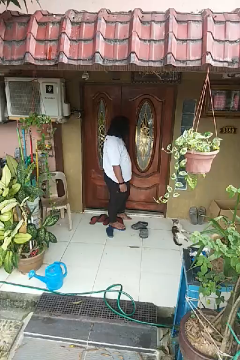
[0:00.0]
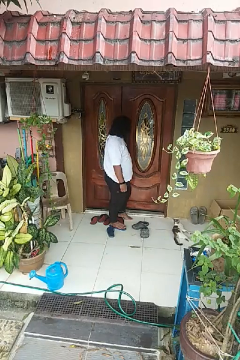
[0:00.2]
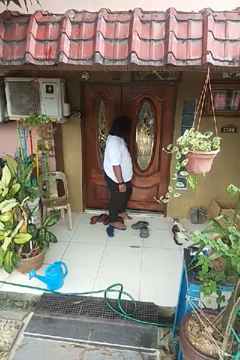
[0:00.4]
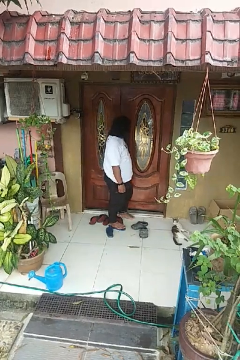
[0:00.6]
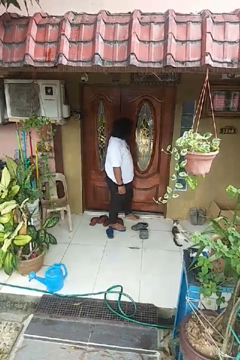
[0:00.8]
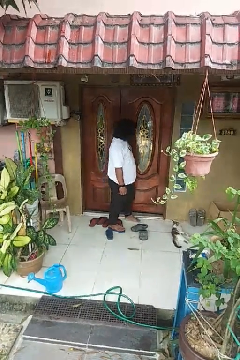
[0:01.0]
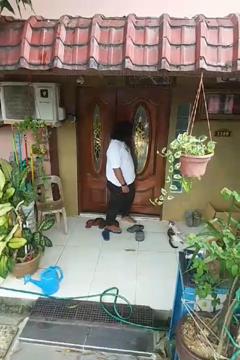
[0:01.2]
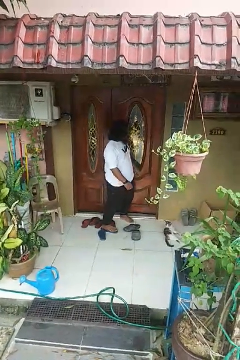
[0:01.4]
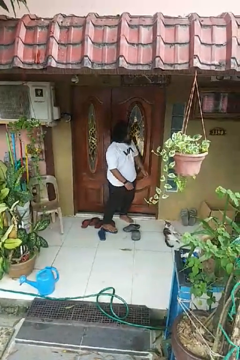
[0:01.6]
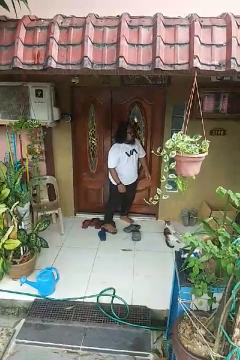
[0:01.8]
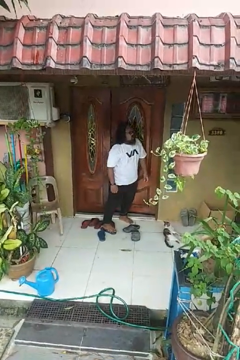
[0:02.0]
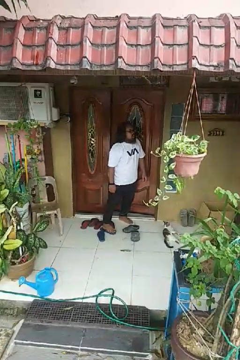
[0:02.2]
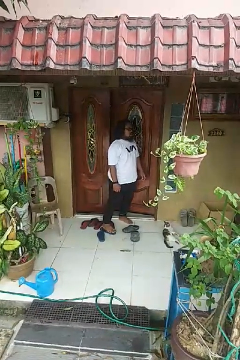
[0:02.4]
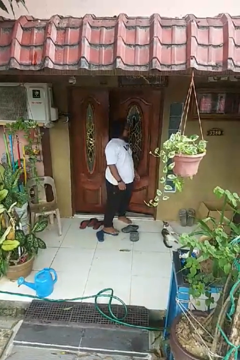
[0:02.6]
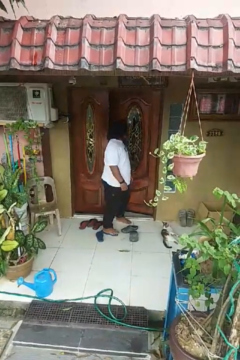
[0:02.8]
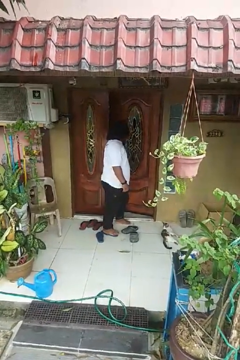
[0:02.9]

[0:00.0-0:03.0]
person opens facility door

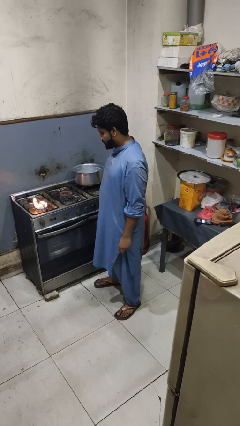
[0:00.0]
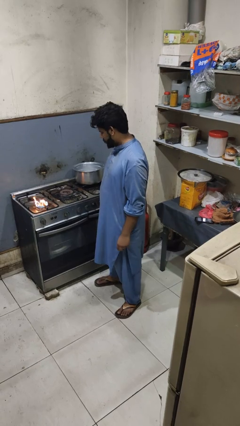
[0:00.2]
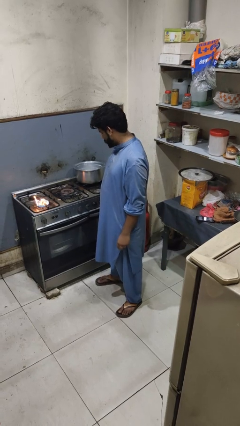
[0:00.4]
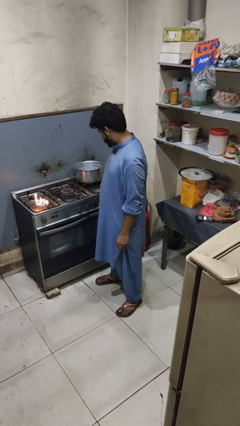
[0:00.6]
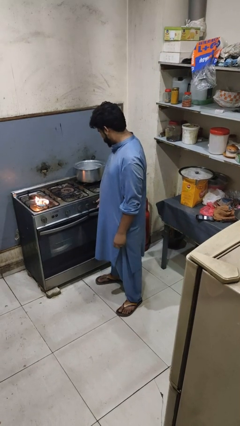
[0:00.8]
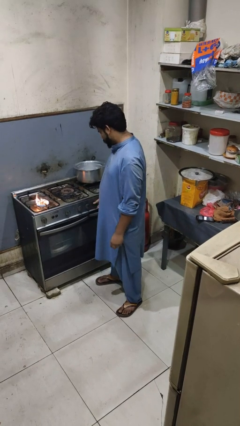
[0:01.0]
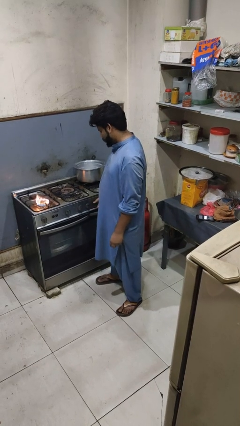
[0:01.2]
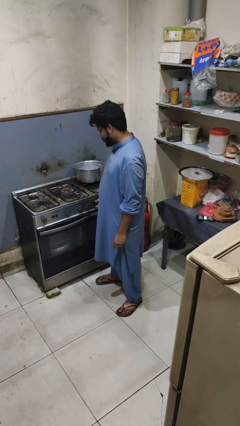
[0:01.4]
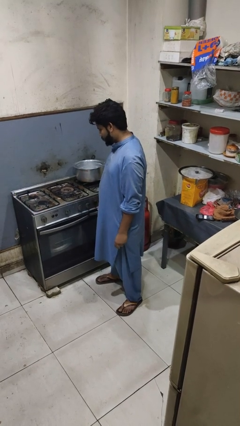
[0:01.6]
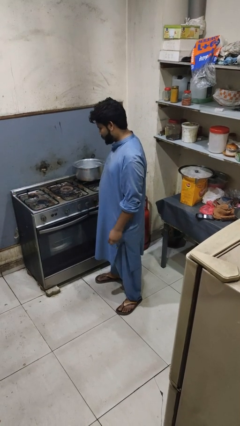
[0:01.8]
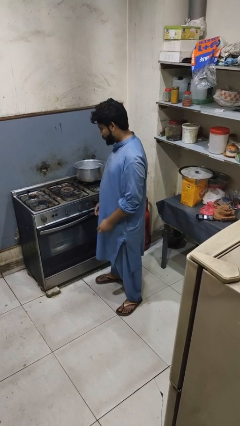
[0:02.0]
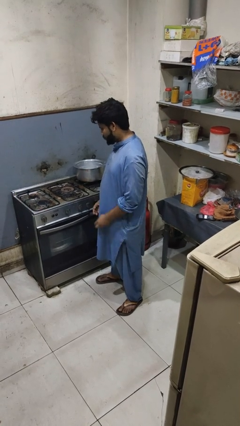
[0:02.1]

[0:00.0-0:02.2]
person turns off stovetop

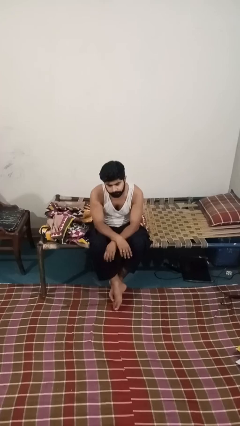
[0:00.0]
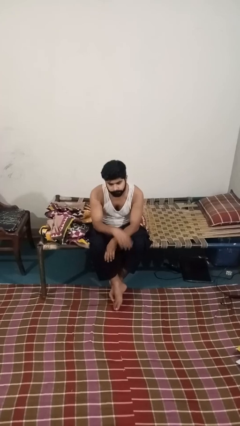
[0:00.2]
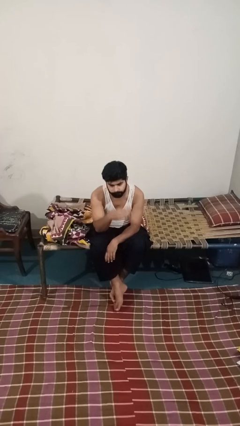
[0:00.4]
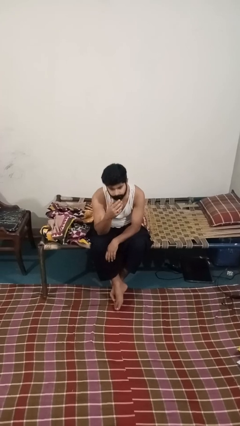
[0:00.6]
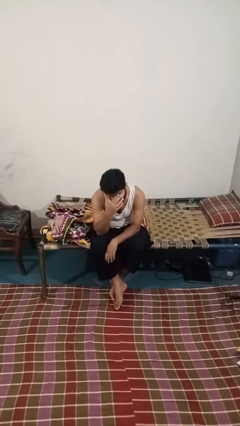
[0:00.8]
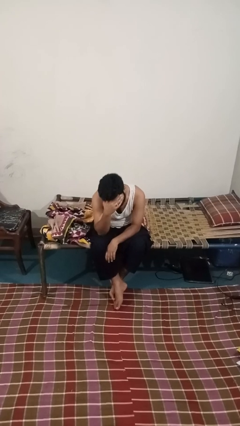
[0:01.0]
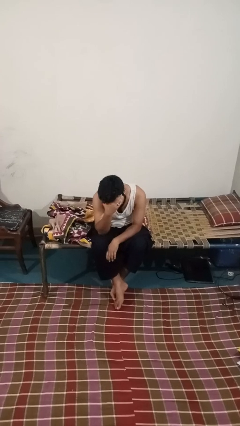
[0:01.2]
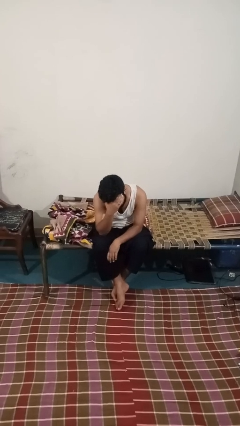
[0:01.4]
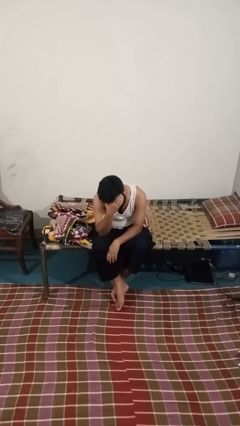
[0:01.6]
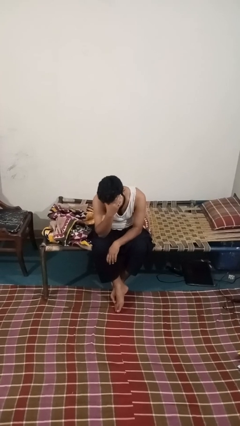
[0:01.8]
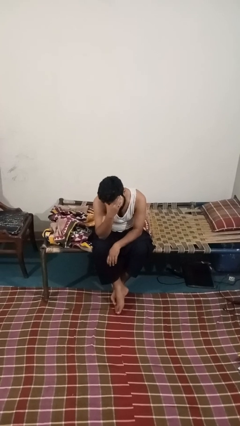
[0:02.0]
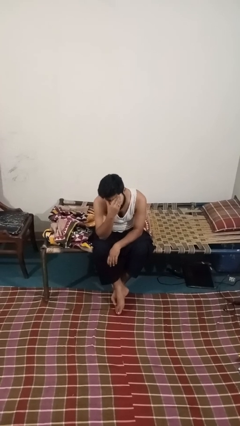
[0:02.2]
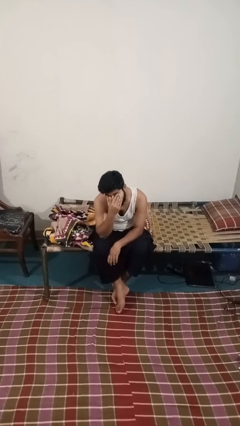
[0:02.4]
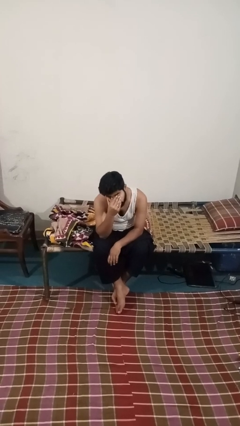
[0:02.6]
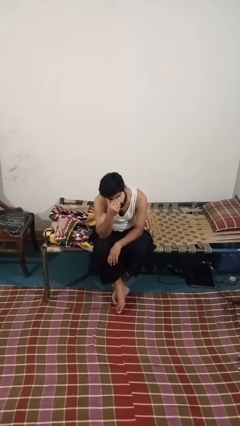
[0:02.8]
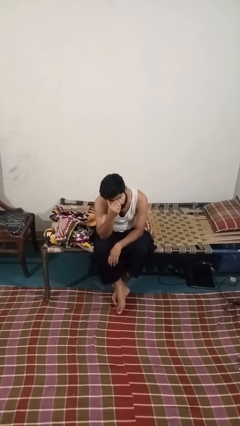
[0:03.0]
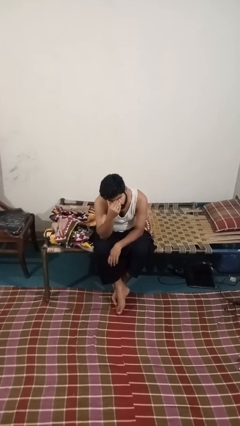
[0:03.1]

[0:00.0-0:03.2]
person covers face with hands

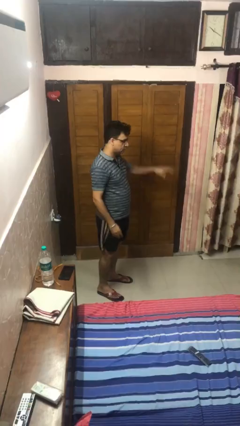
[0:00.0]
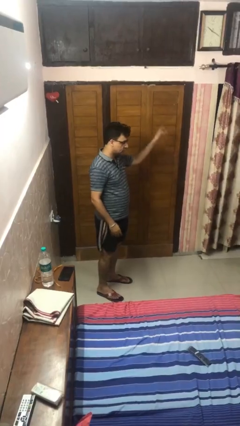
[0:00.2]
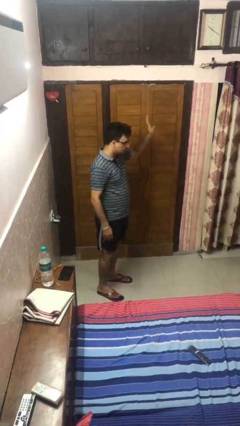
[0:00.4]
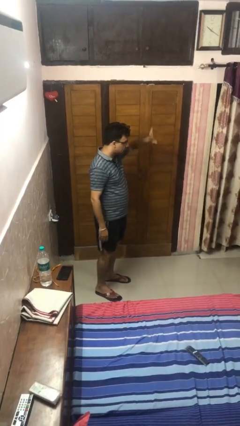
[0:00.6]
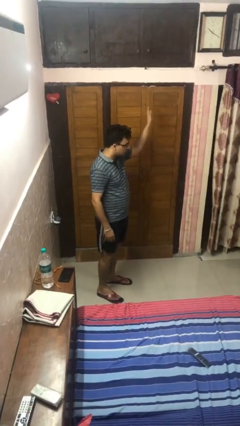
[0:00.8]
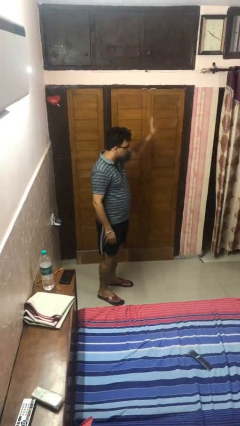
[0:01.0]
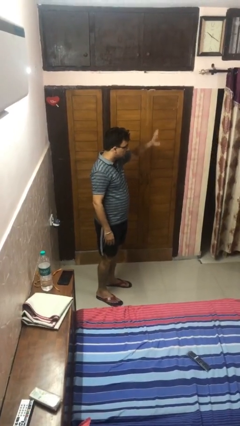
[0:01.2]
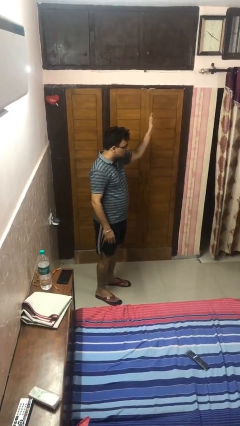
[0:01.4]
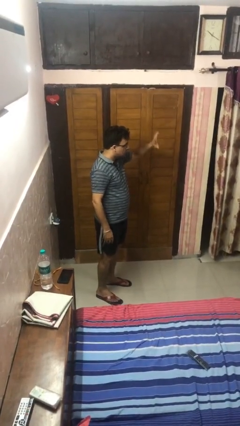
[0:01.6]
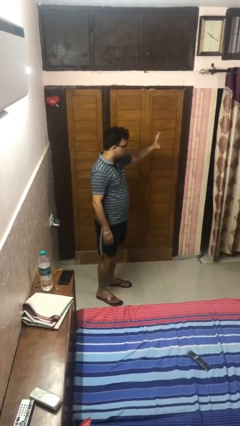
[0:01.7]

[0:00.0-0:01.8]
person waves at person

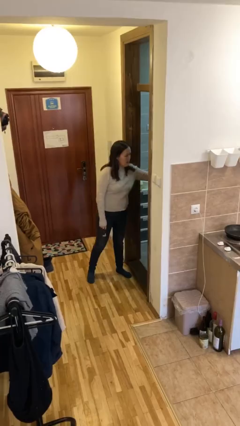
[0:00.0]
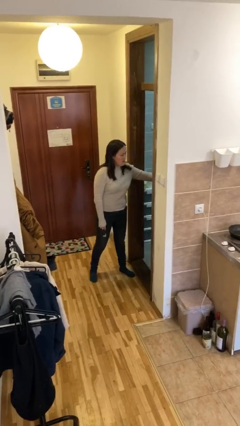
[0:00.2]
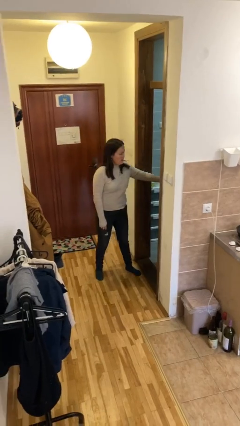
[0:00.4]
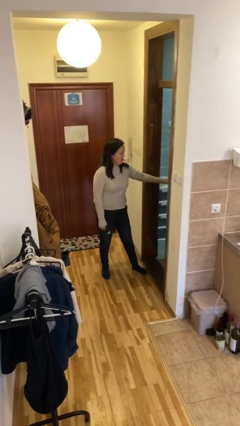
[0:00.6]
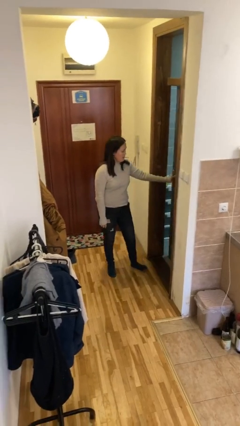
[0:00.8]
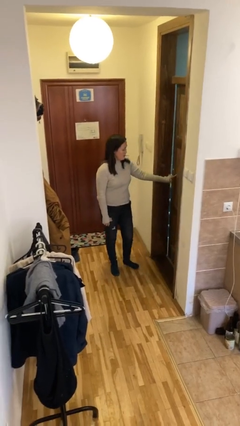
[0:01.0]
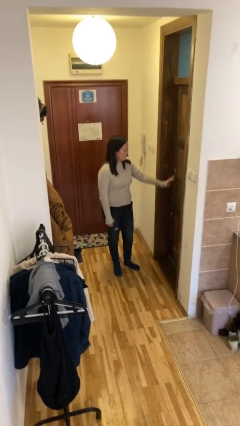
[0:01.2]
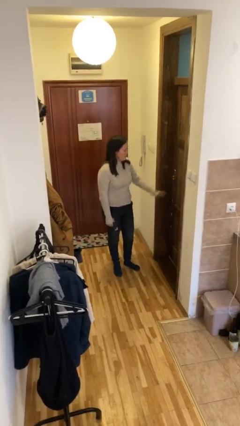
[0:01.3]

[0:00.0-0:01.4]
person closes facility door

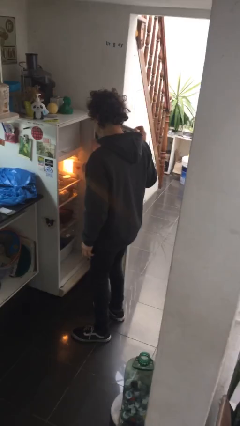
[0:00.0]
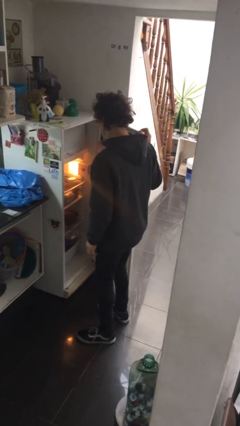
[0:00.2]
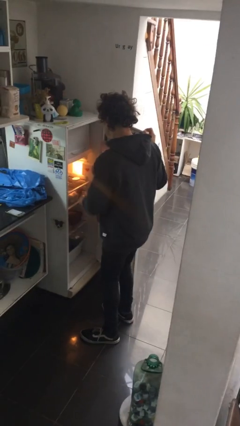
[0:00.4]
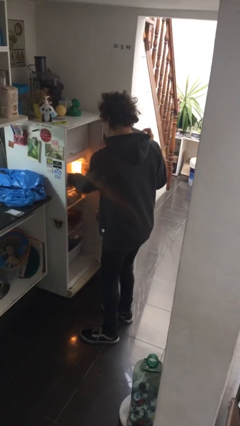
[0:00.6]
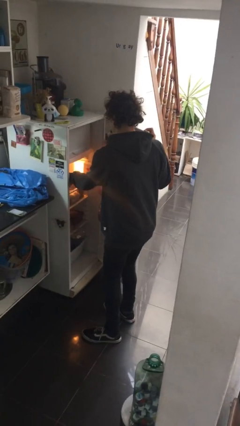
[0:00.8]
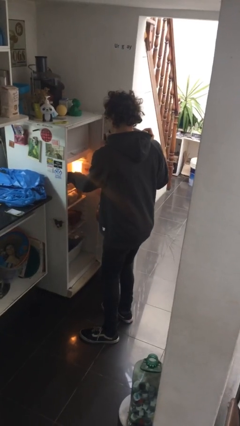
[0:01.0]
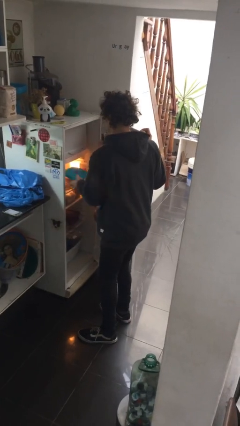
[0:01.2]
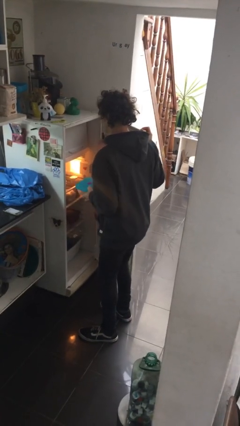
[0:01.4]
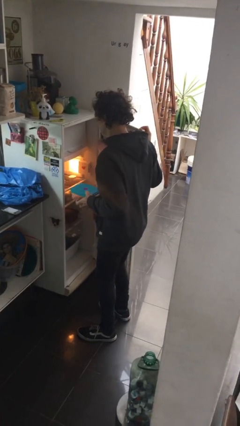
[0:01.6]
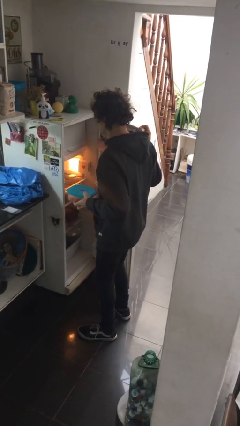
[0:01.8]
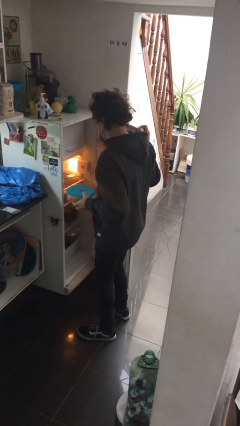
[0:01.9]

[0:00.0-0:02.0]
person takes object from refrigerator

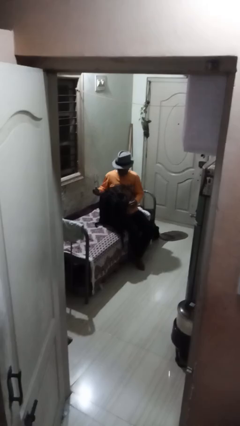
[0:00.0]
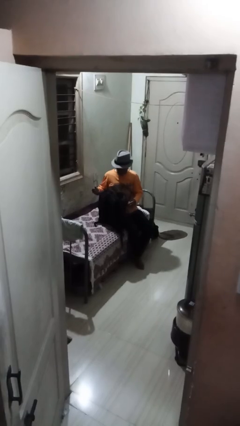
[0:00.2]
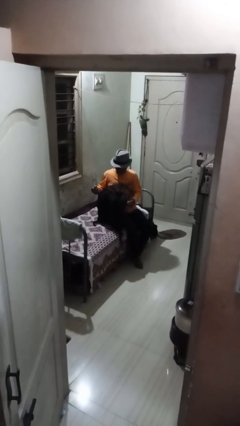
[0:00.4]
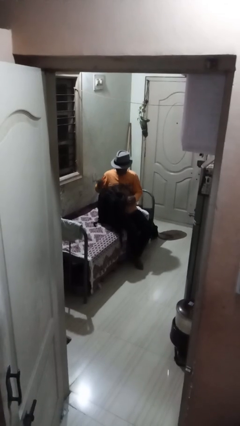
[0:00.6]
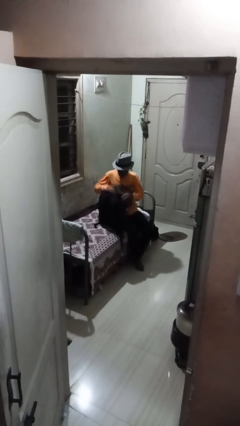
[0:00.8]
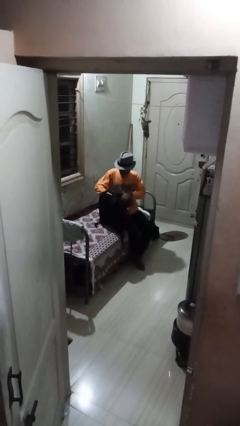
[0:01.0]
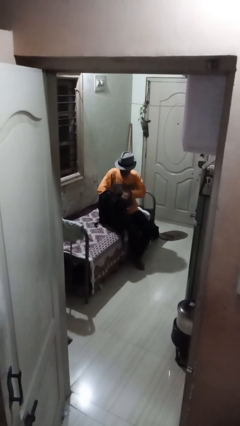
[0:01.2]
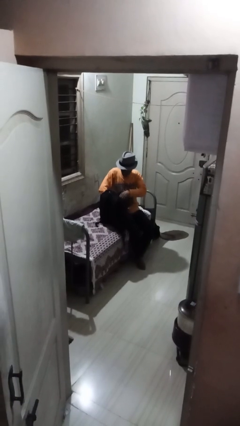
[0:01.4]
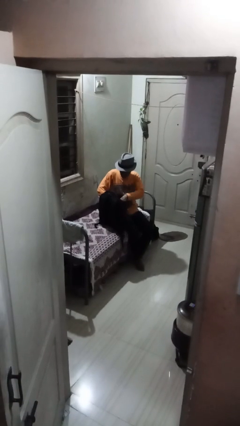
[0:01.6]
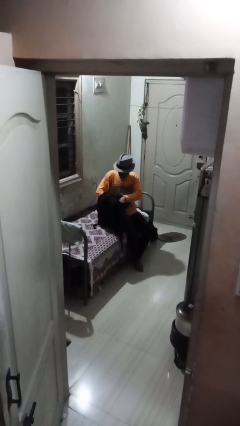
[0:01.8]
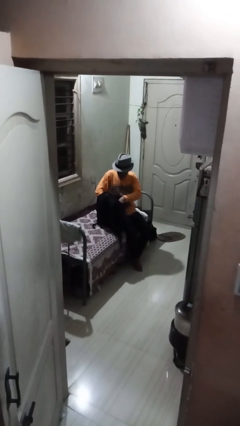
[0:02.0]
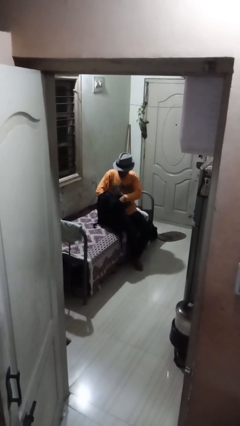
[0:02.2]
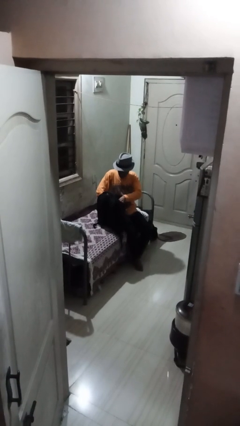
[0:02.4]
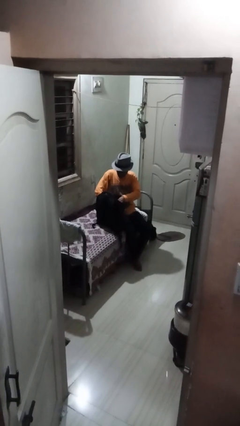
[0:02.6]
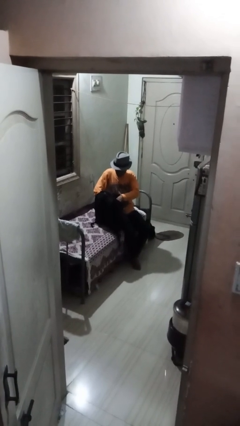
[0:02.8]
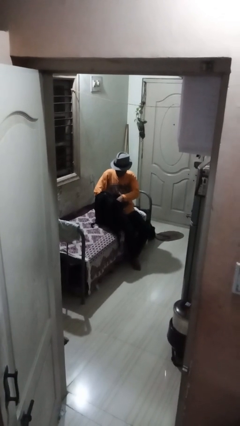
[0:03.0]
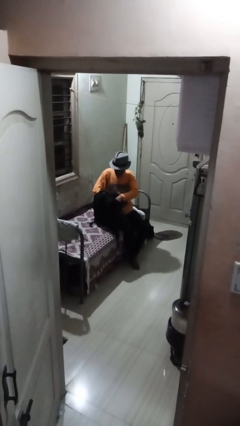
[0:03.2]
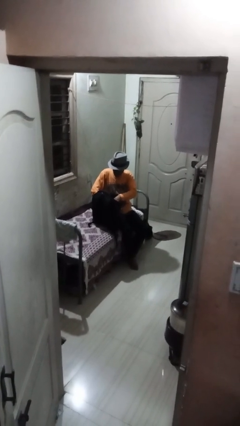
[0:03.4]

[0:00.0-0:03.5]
person searches in backpack

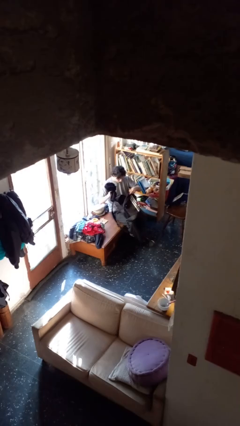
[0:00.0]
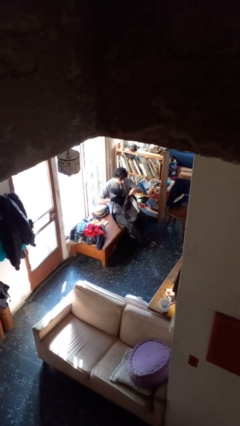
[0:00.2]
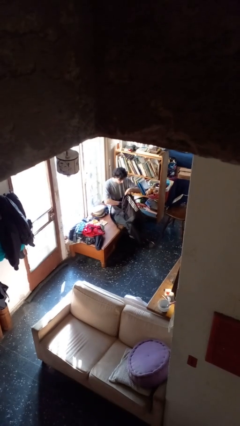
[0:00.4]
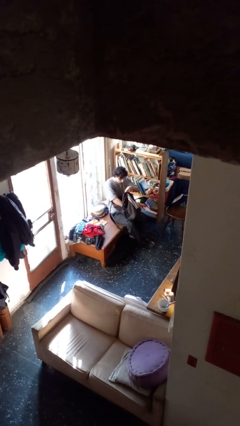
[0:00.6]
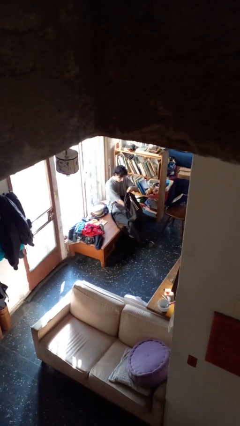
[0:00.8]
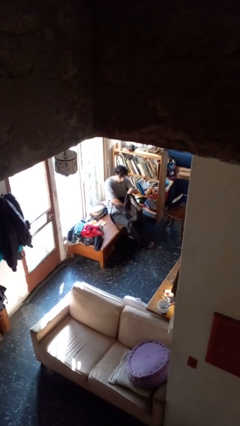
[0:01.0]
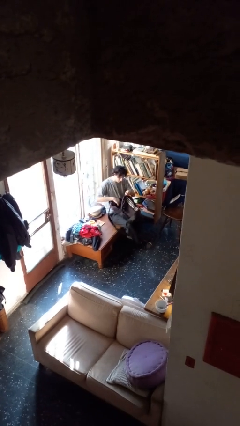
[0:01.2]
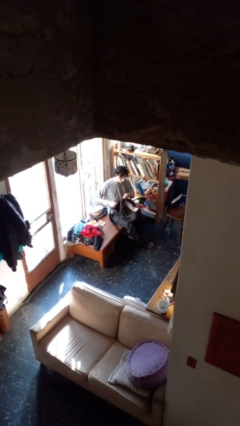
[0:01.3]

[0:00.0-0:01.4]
person puts object into backpack
